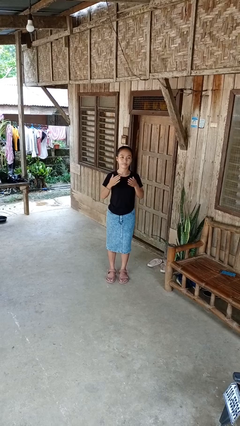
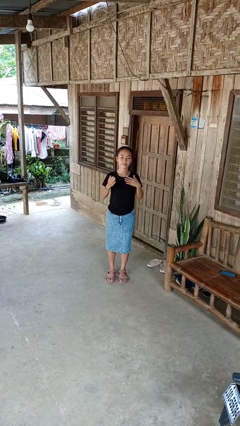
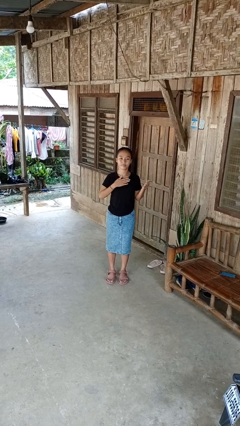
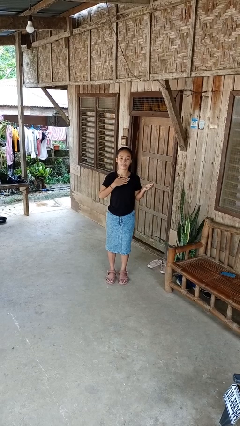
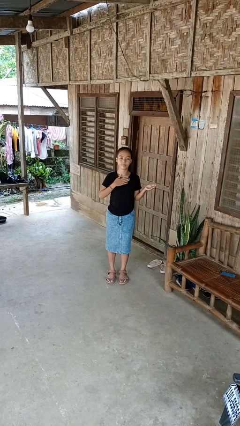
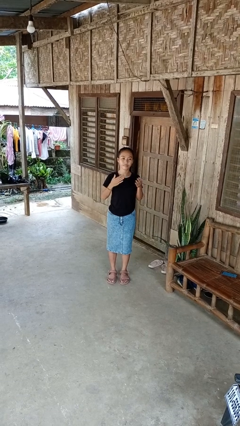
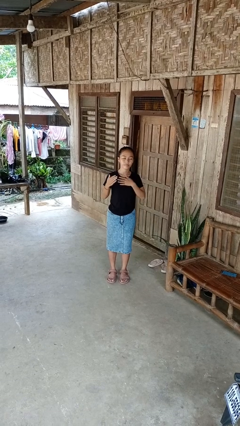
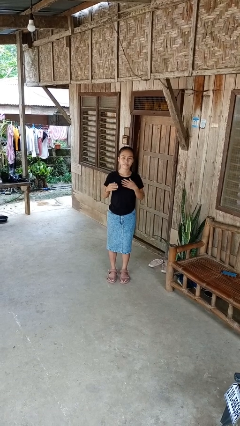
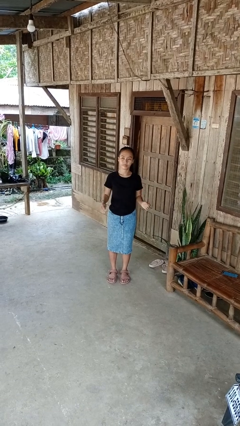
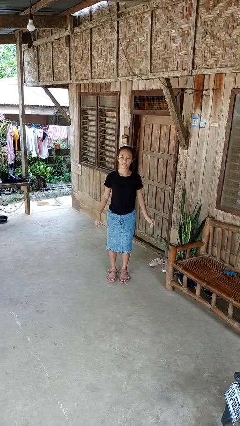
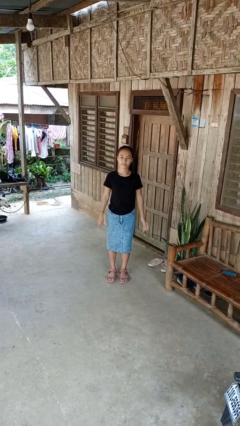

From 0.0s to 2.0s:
person drums on chest

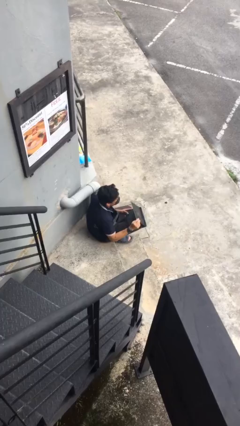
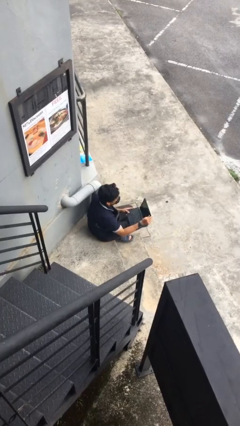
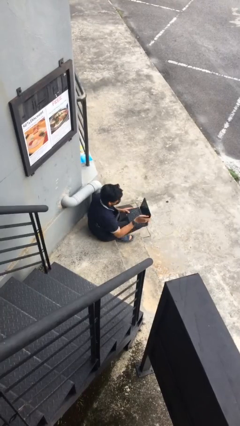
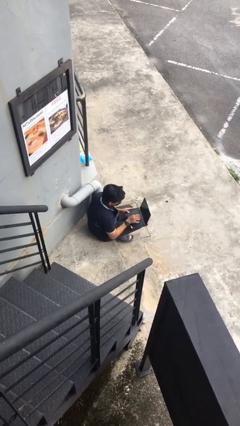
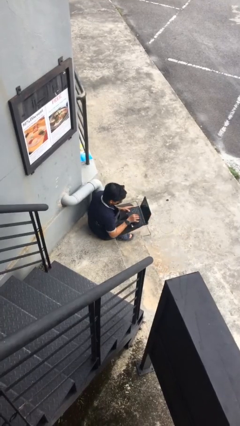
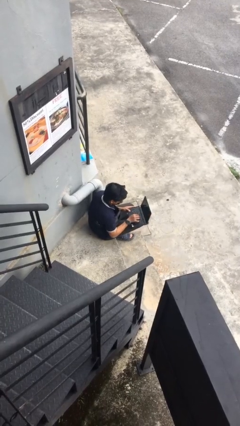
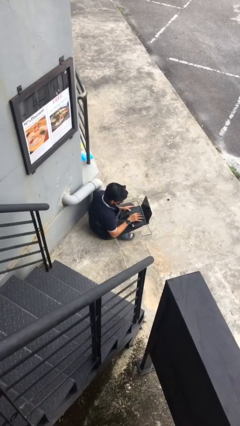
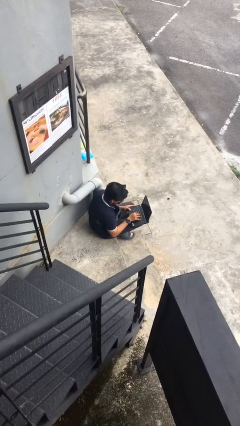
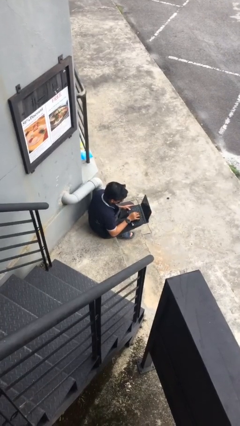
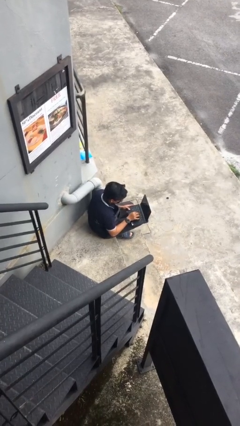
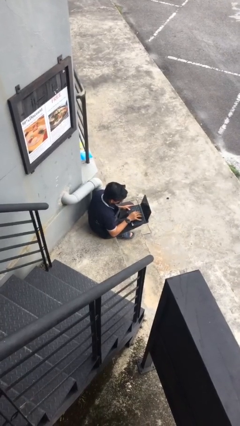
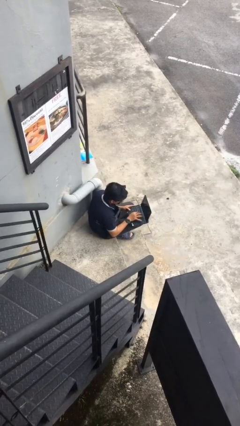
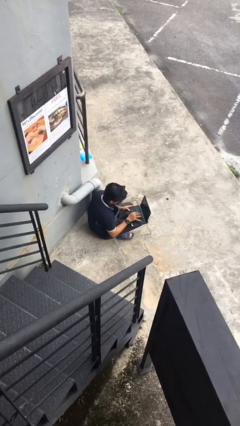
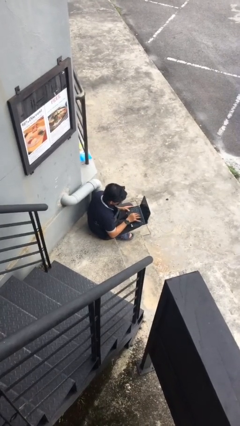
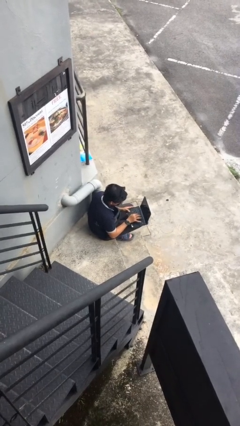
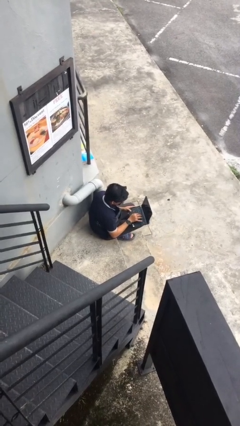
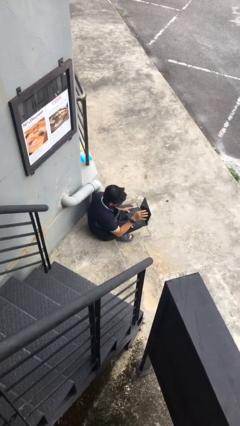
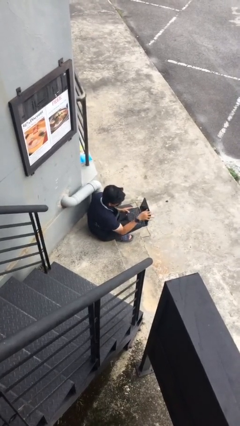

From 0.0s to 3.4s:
person interacts with laptop

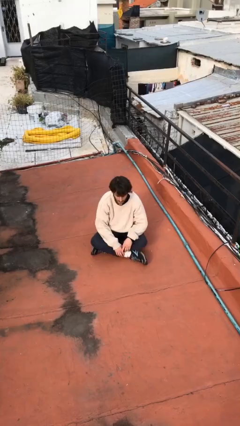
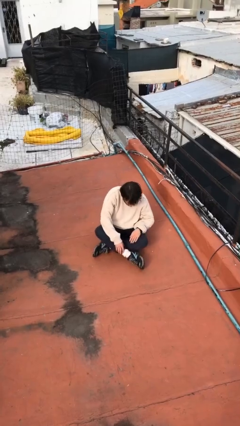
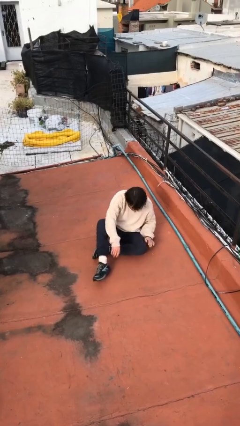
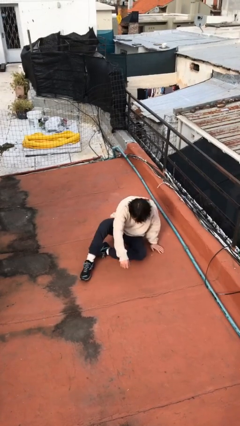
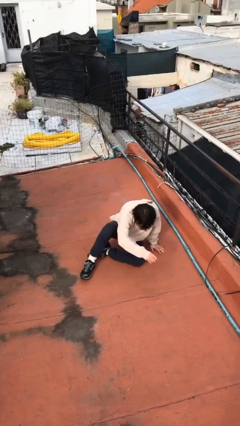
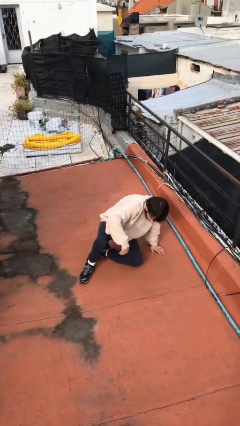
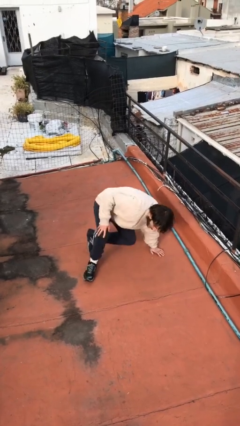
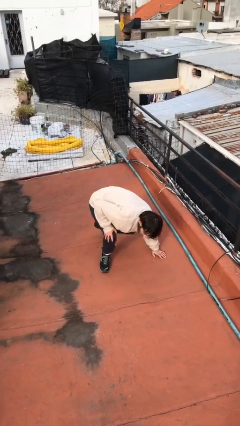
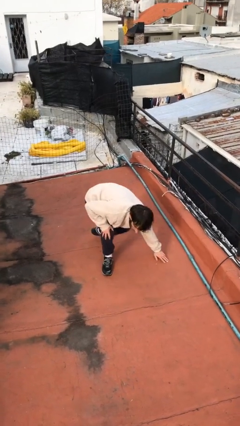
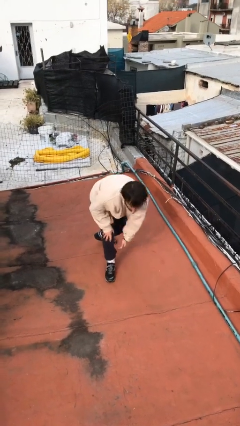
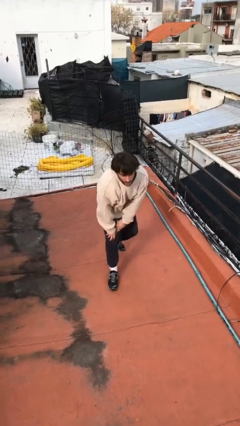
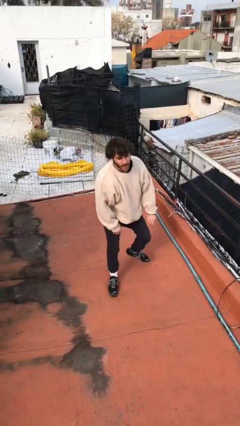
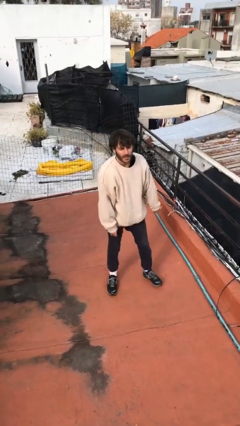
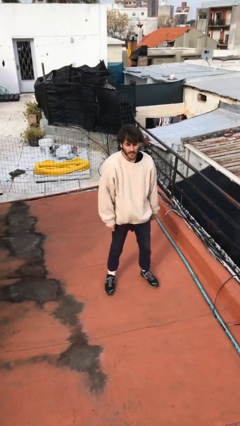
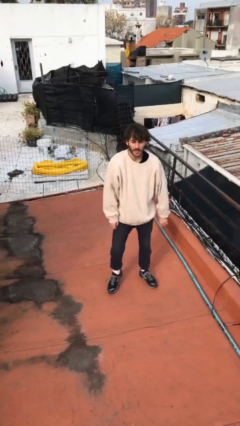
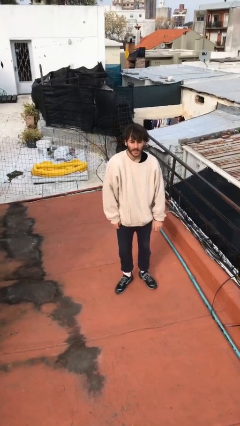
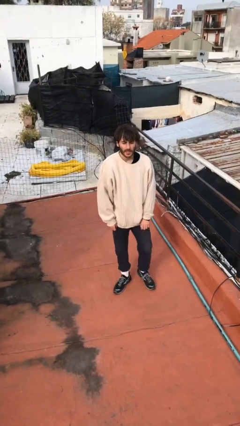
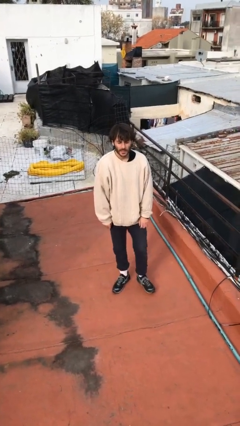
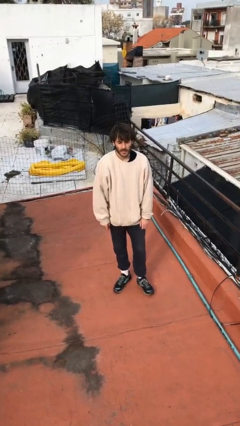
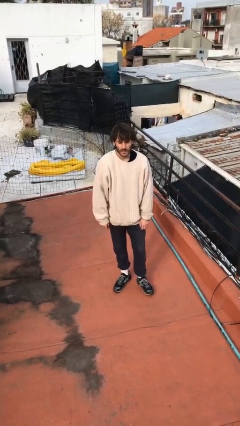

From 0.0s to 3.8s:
person stands up from floor

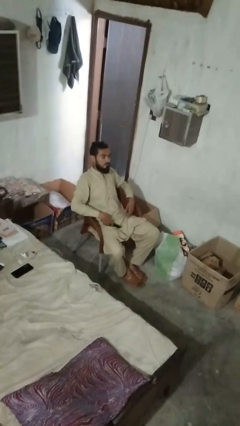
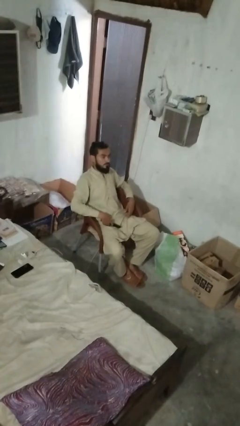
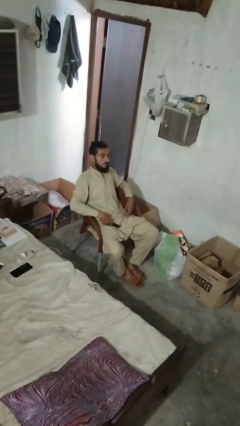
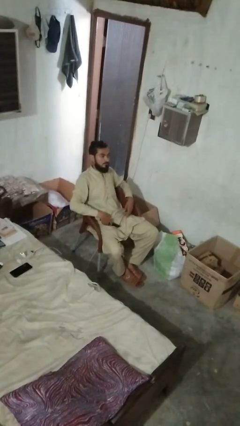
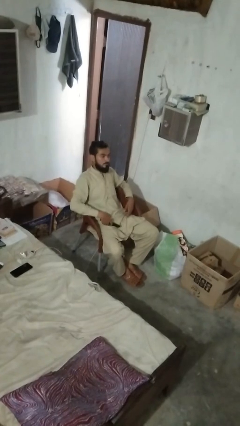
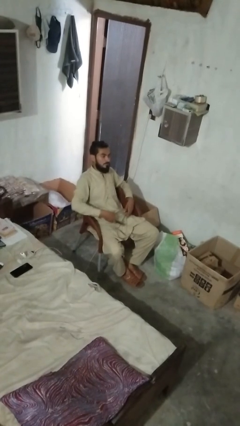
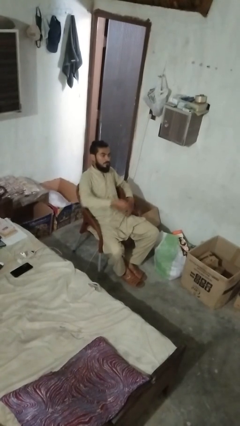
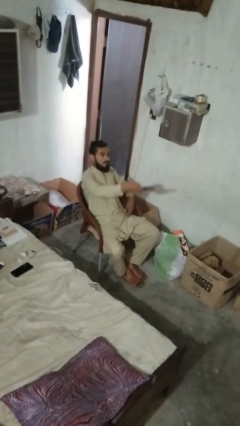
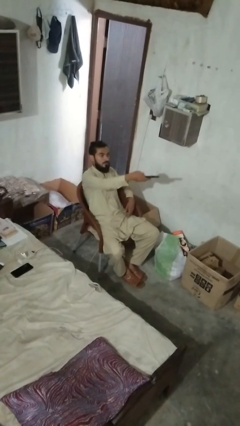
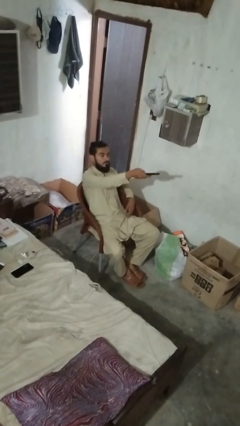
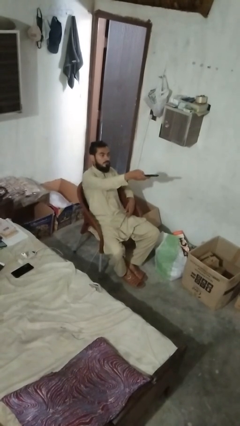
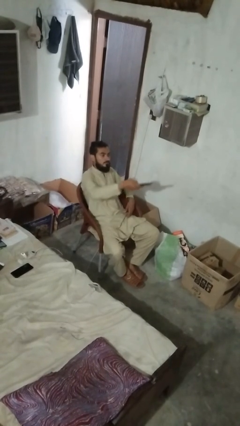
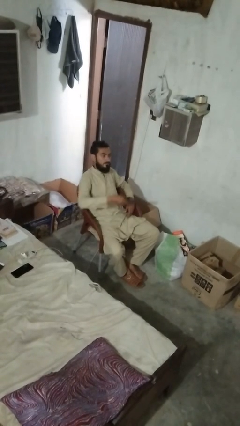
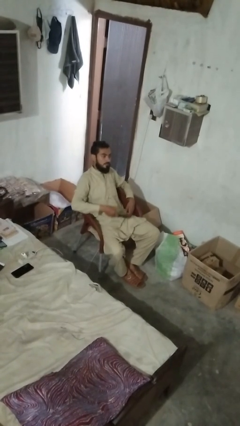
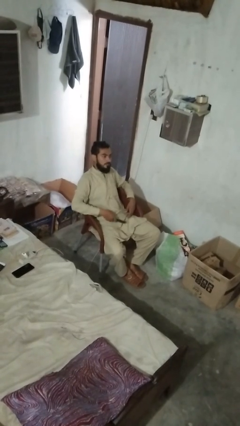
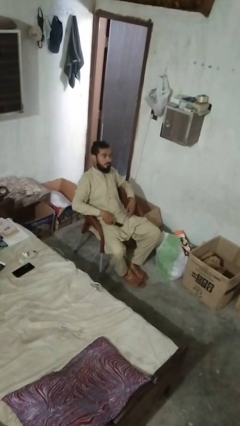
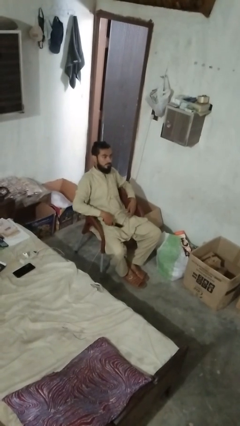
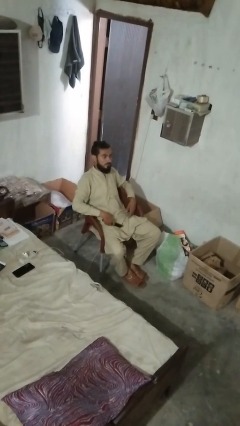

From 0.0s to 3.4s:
person uses television remote

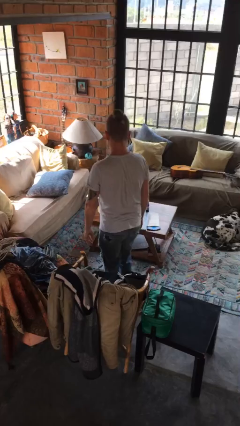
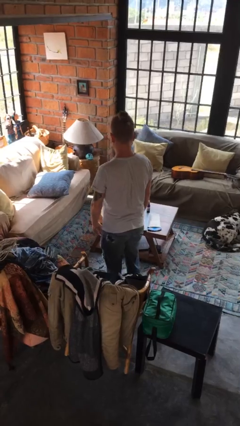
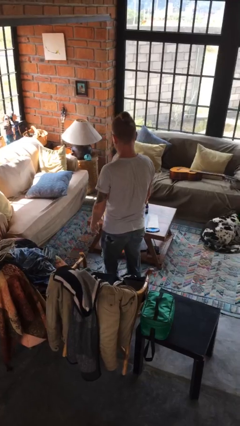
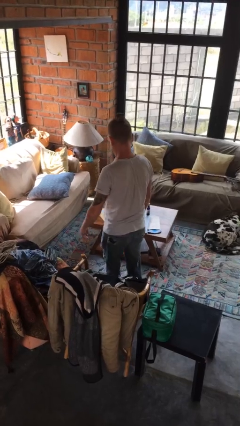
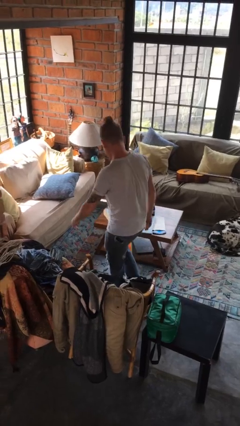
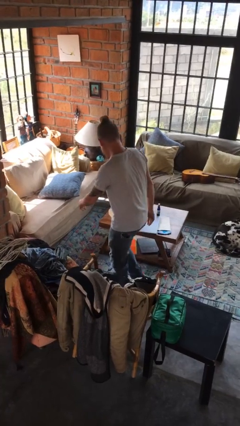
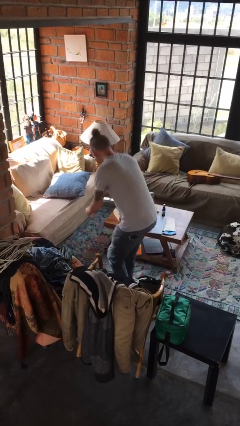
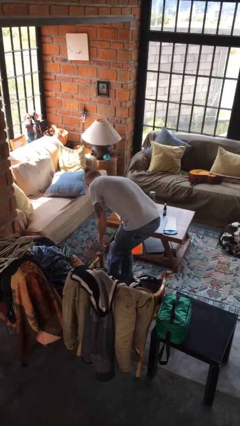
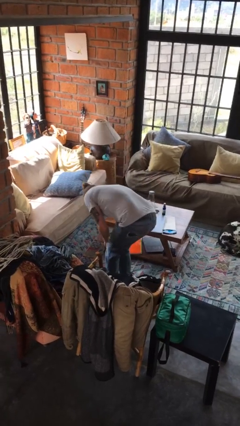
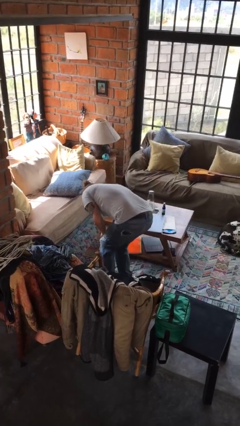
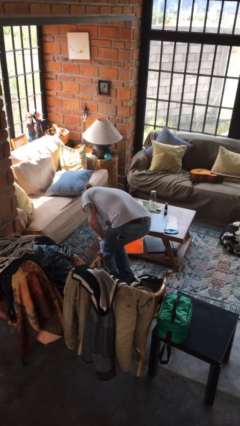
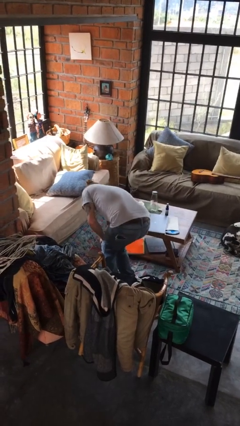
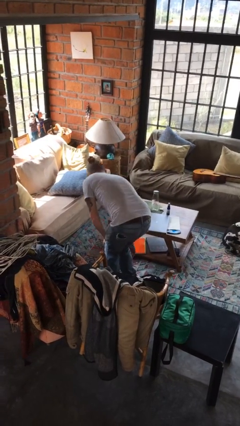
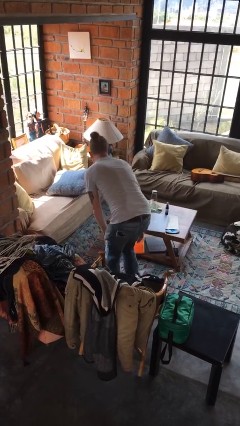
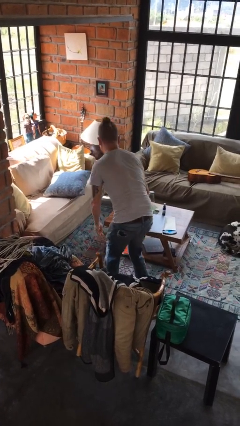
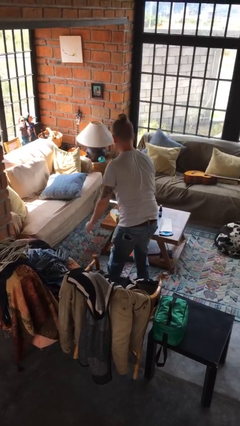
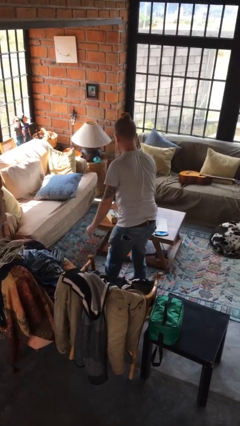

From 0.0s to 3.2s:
person stubs toe

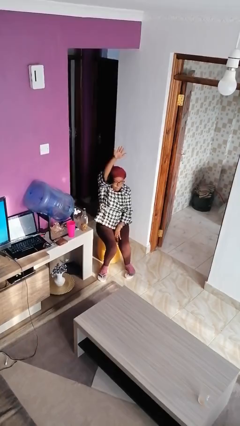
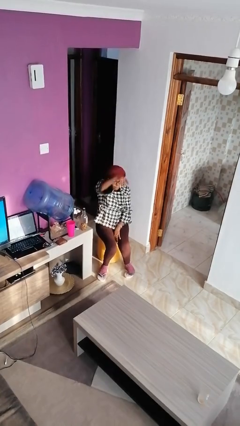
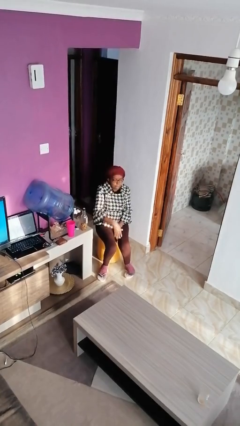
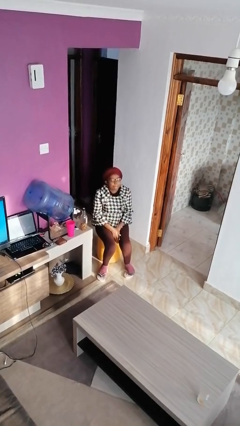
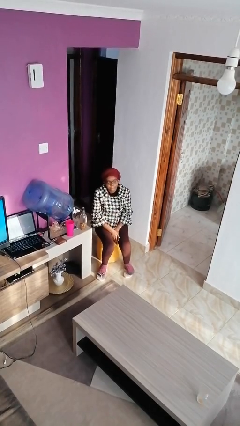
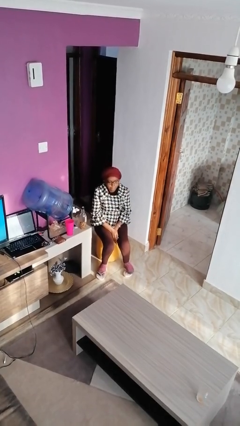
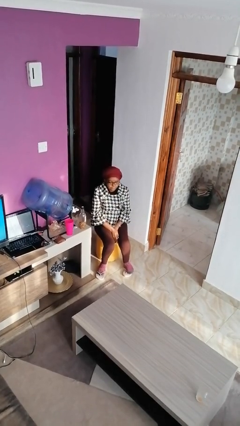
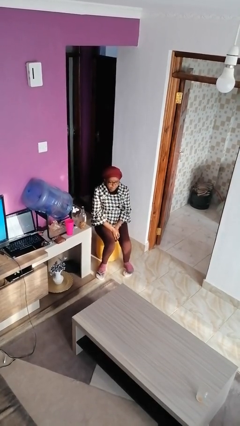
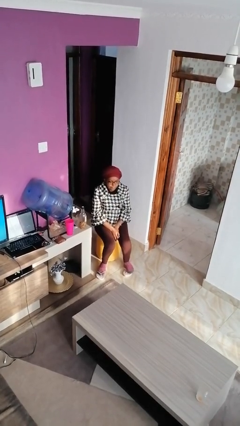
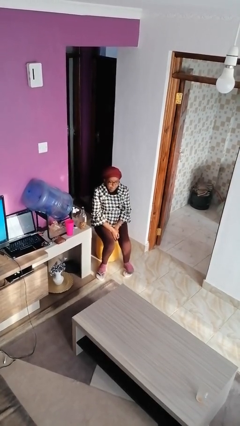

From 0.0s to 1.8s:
person gestures lower hand
